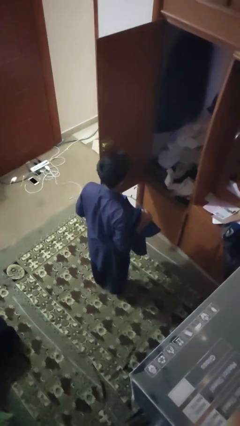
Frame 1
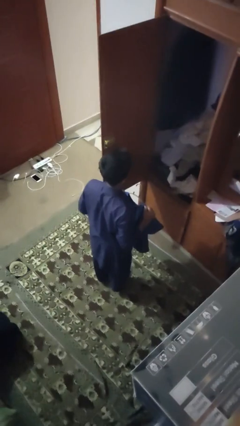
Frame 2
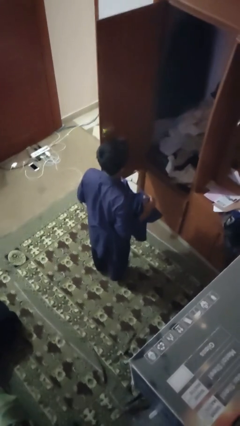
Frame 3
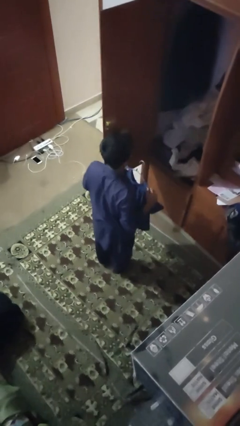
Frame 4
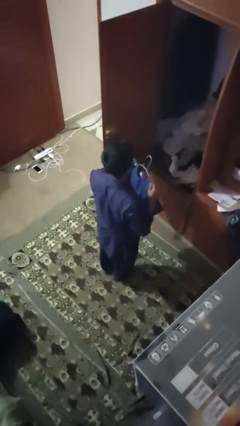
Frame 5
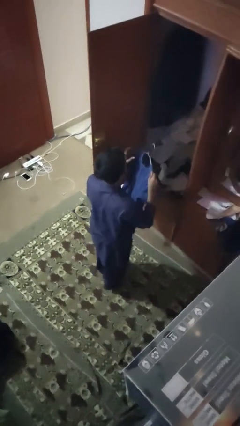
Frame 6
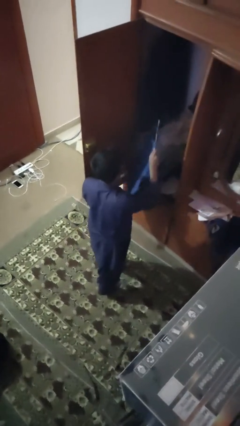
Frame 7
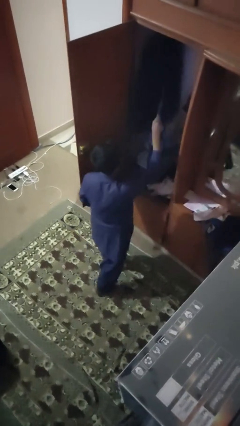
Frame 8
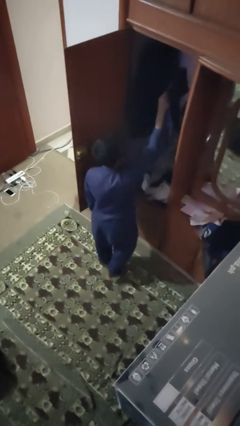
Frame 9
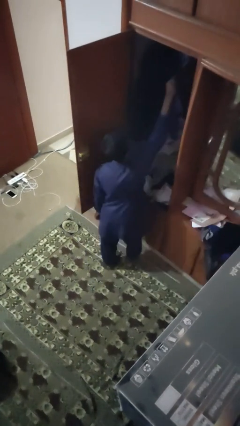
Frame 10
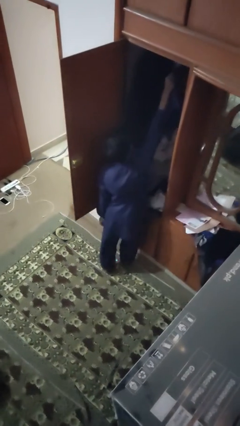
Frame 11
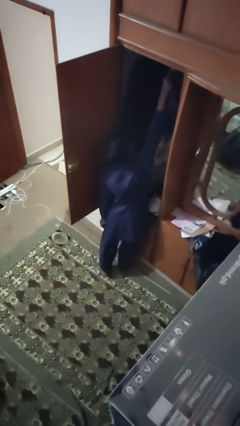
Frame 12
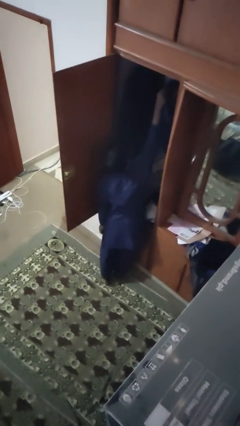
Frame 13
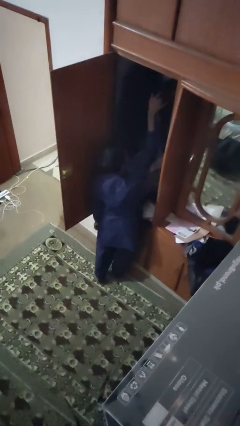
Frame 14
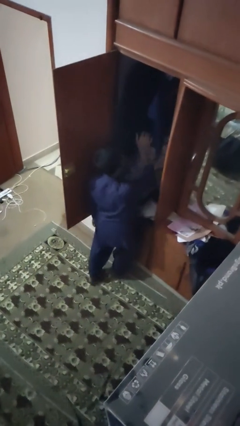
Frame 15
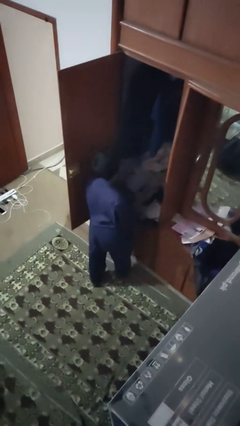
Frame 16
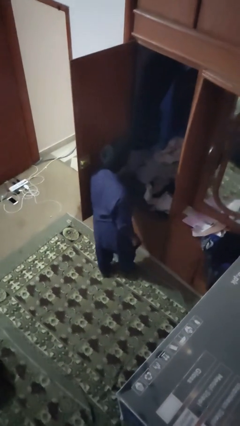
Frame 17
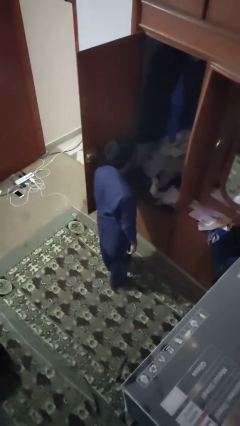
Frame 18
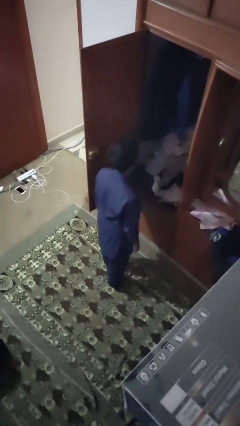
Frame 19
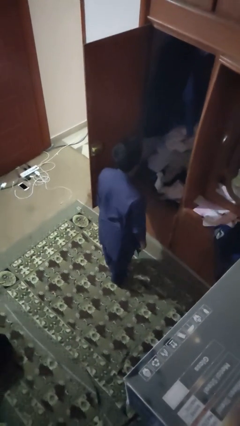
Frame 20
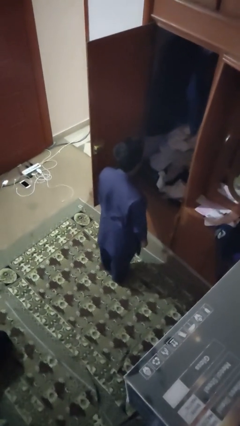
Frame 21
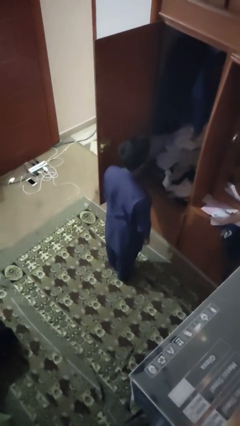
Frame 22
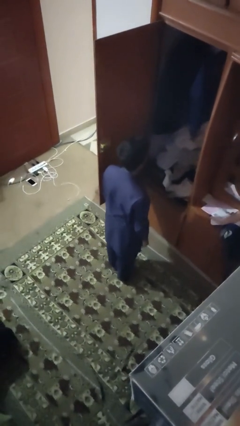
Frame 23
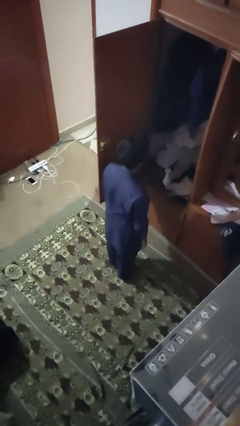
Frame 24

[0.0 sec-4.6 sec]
person puts clothes into closet

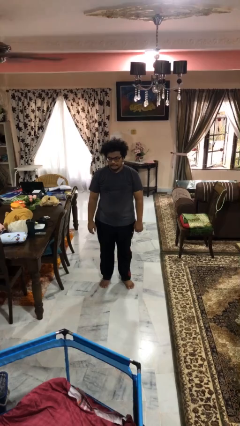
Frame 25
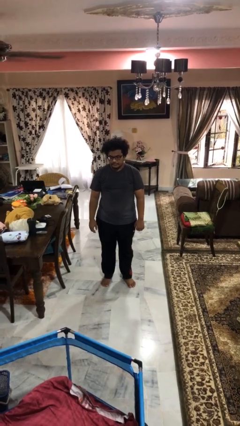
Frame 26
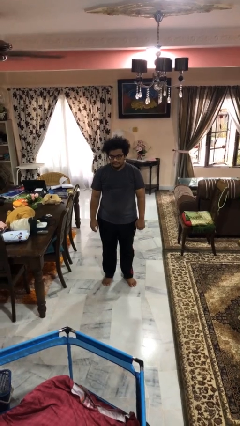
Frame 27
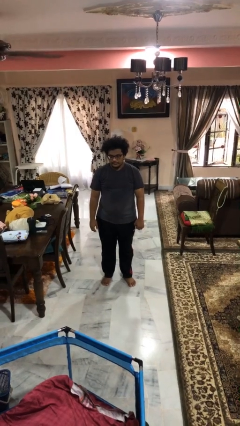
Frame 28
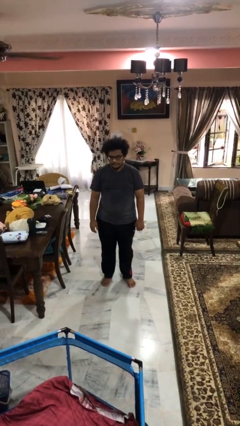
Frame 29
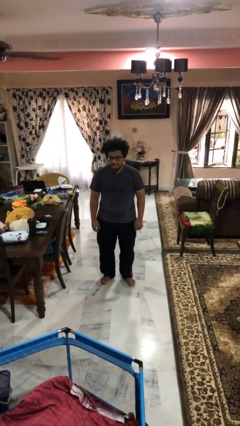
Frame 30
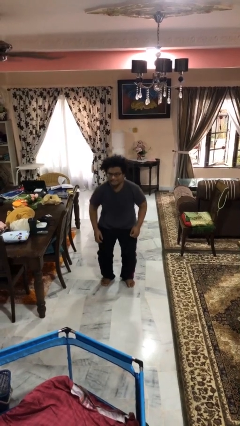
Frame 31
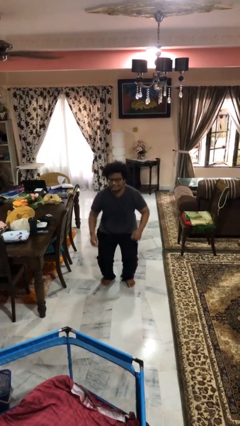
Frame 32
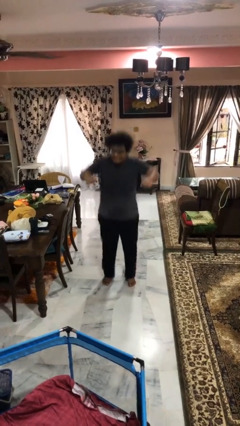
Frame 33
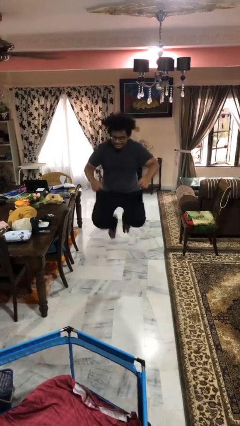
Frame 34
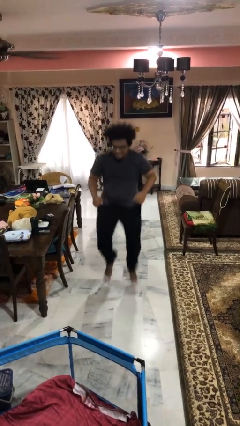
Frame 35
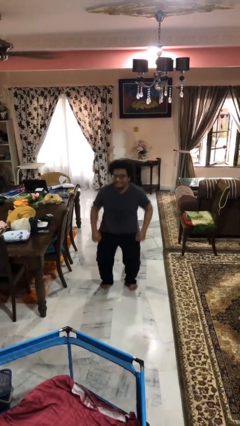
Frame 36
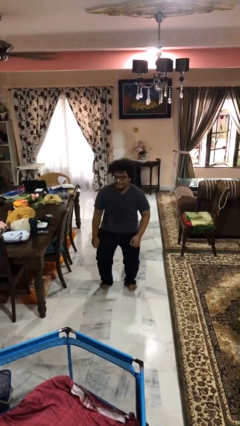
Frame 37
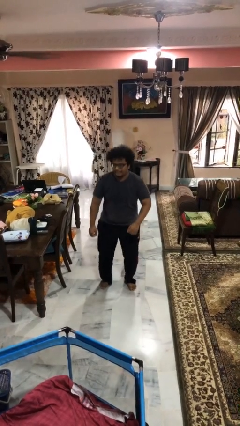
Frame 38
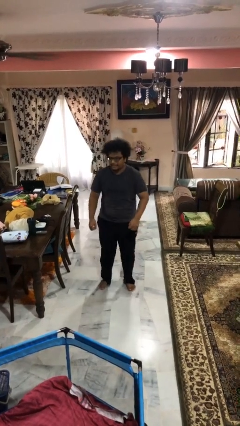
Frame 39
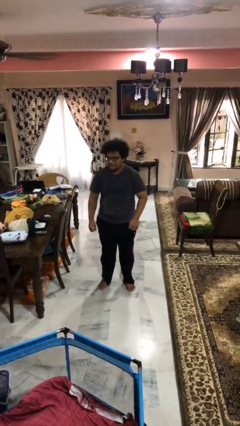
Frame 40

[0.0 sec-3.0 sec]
person jumps

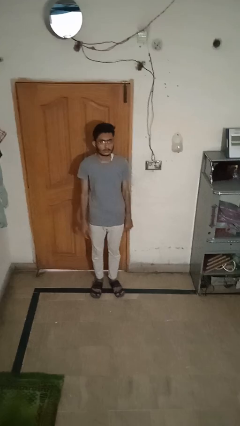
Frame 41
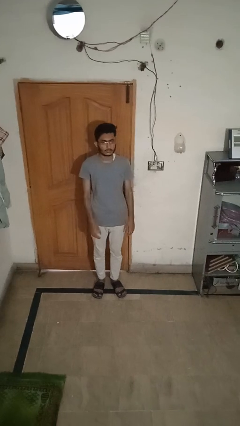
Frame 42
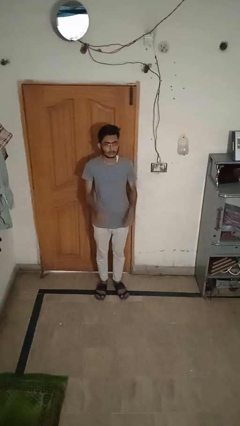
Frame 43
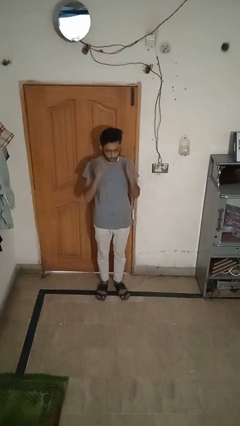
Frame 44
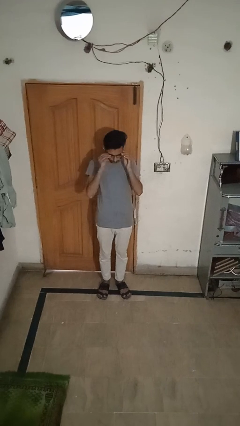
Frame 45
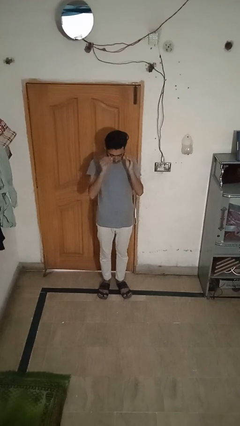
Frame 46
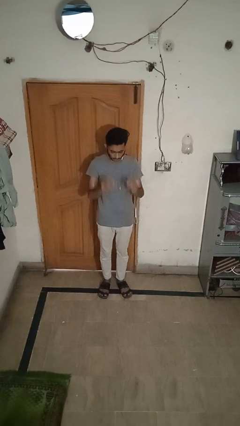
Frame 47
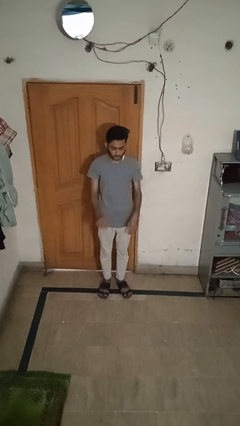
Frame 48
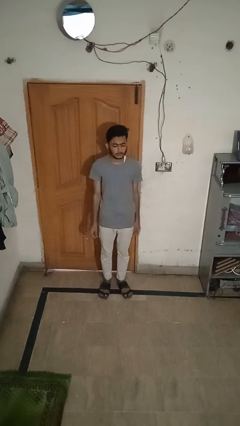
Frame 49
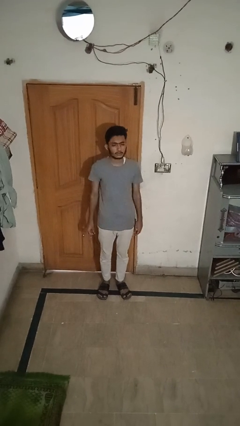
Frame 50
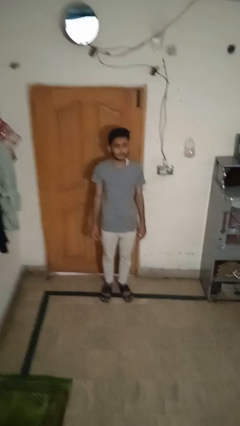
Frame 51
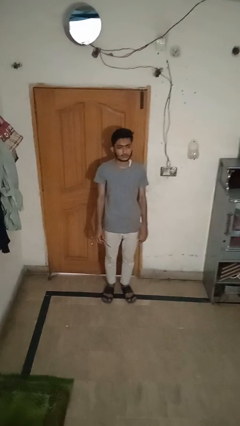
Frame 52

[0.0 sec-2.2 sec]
person takes off glasses

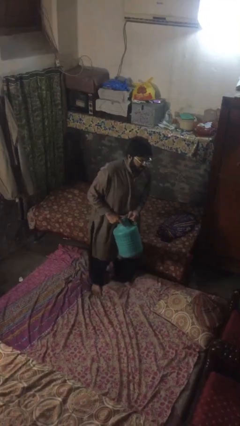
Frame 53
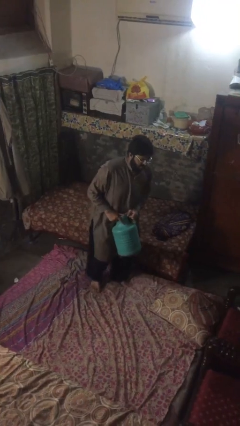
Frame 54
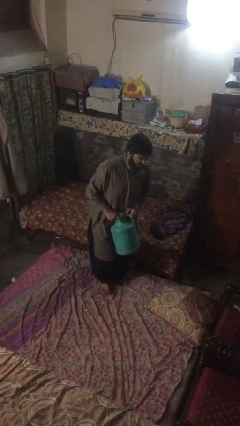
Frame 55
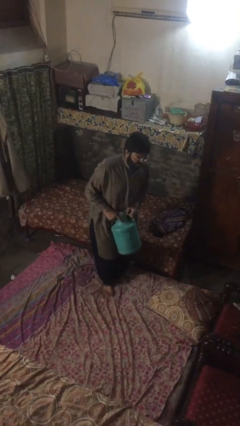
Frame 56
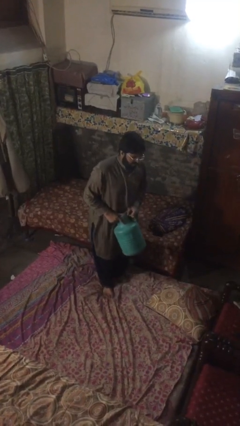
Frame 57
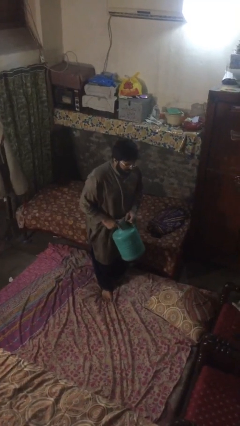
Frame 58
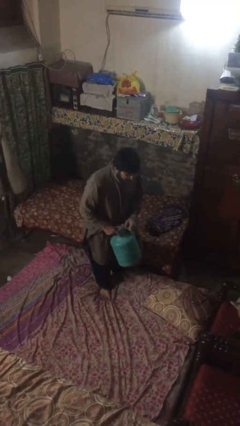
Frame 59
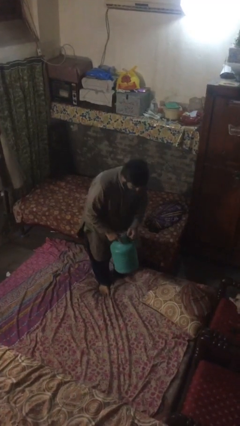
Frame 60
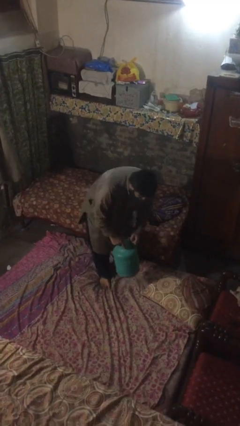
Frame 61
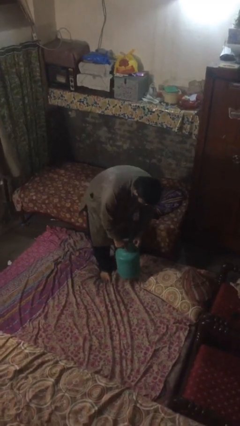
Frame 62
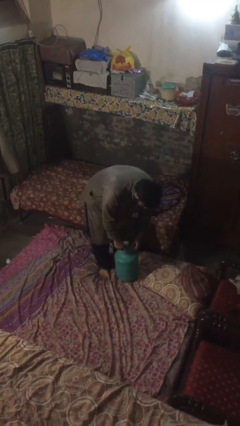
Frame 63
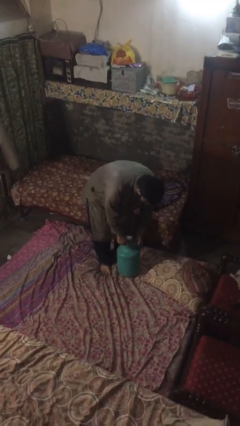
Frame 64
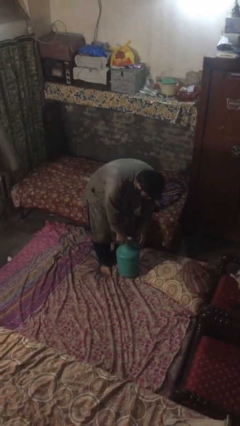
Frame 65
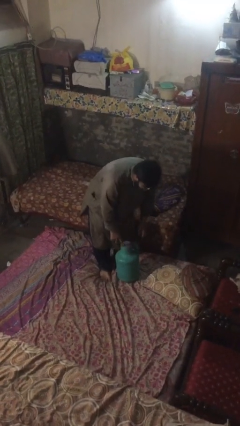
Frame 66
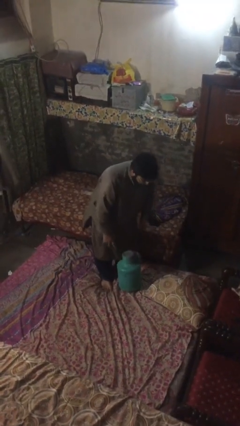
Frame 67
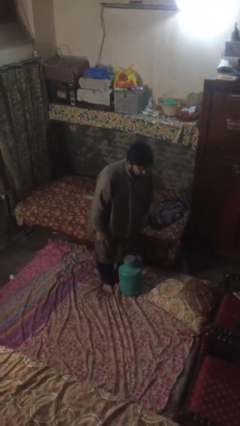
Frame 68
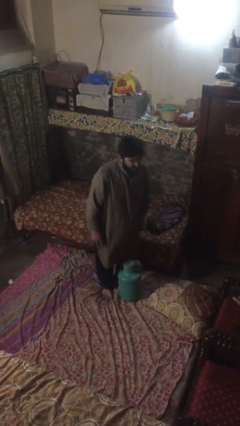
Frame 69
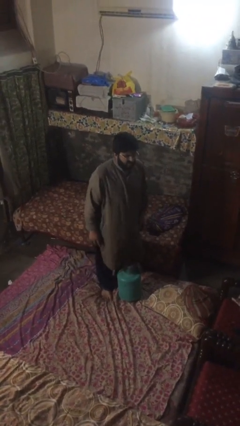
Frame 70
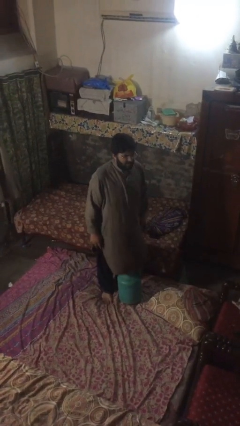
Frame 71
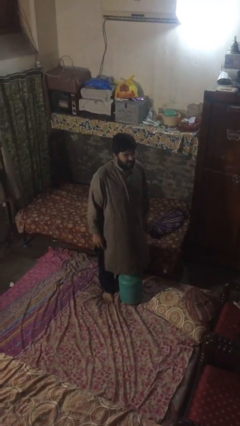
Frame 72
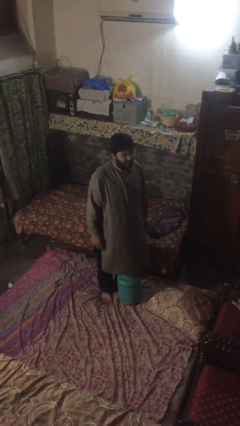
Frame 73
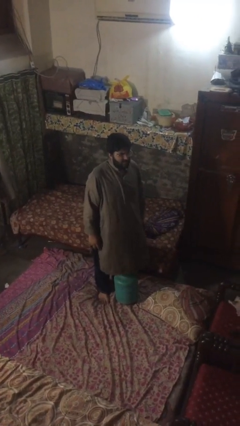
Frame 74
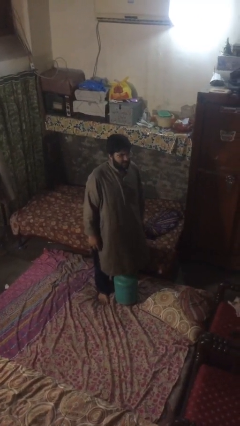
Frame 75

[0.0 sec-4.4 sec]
person puts down object on floor

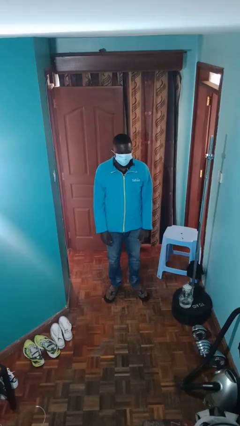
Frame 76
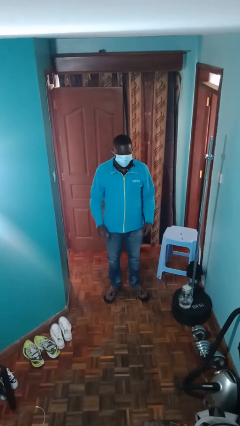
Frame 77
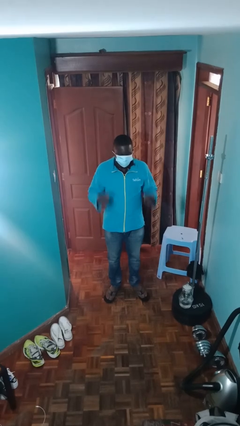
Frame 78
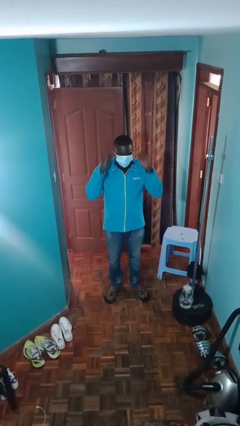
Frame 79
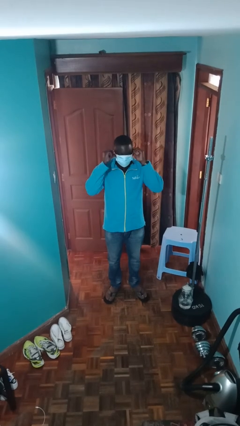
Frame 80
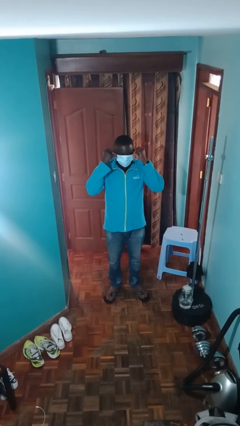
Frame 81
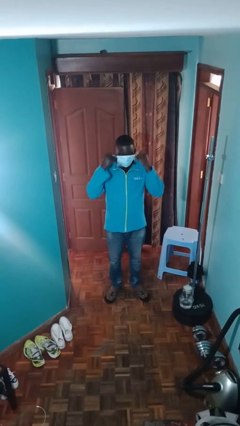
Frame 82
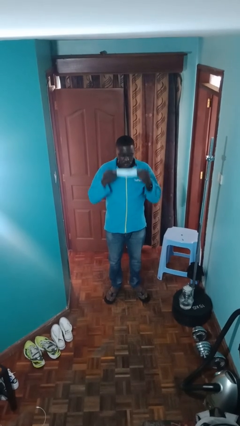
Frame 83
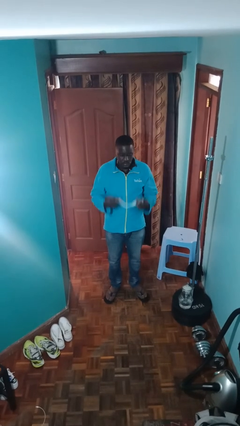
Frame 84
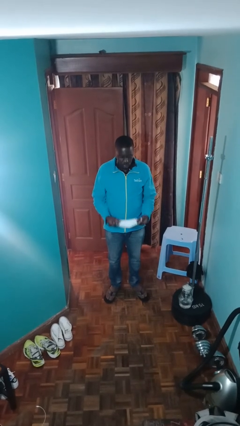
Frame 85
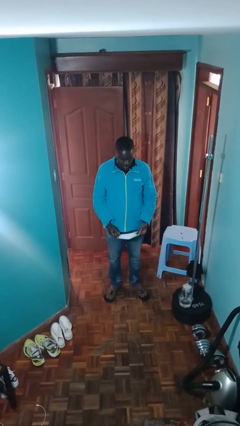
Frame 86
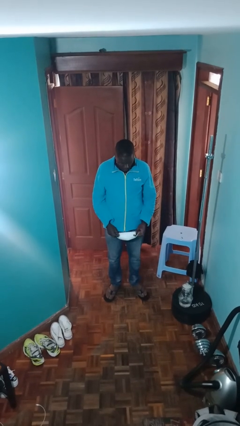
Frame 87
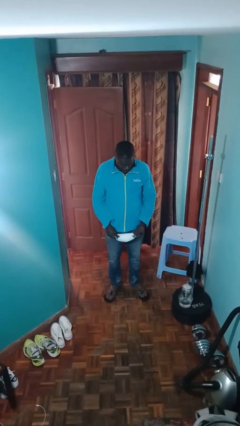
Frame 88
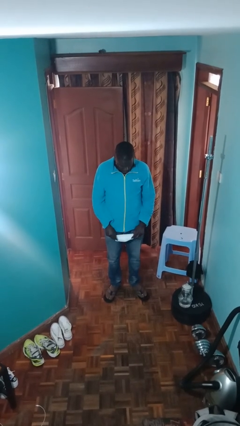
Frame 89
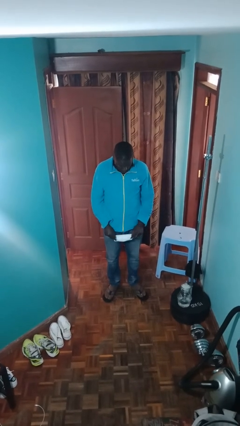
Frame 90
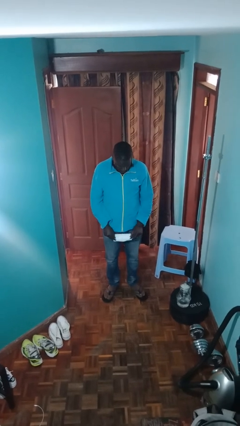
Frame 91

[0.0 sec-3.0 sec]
person takes off facemask
